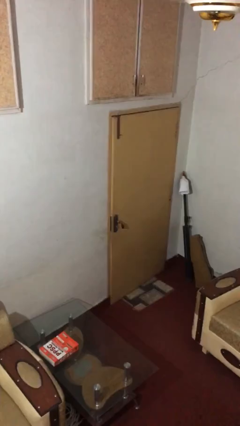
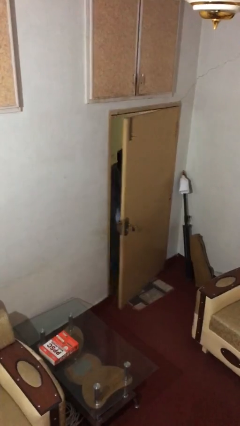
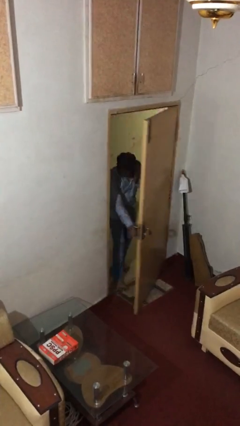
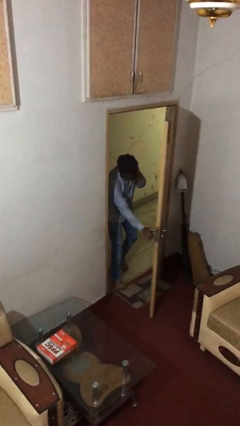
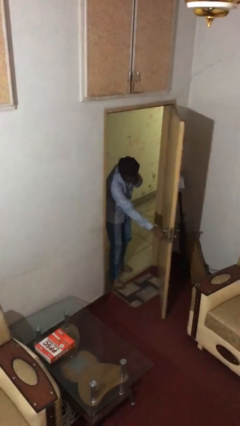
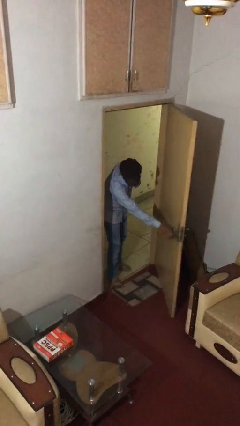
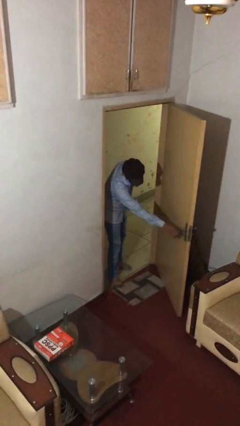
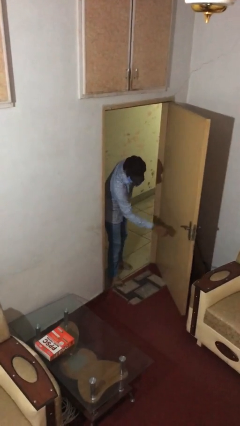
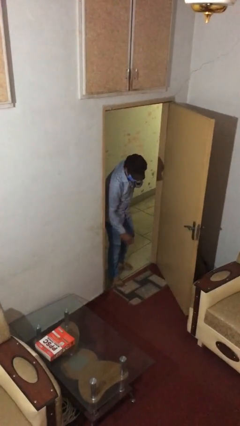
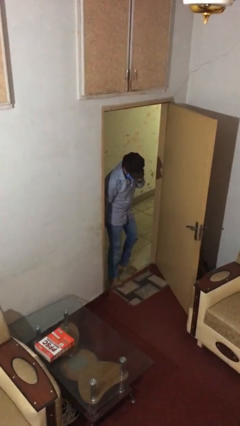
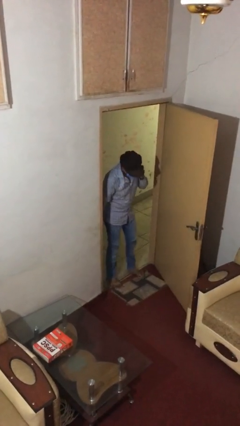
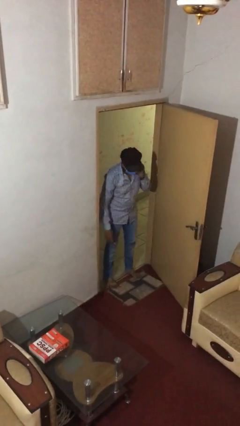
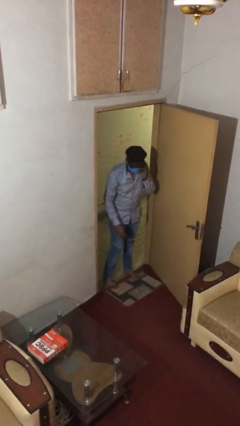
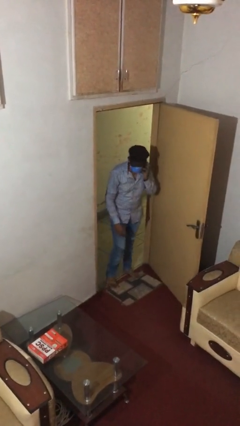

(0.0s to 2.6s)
person opens facility door

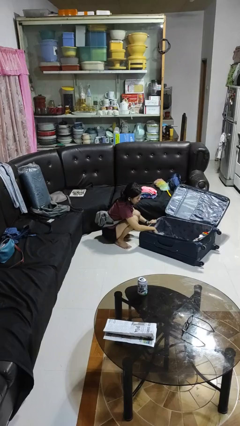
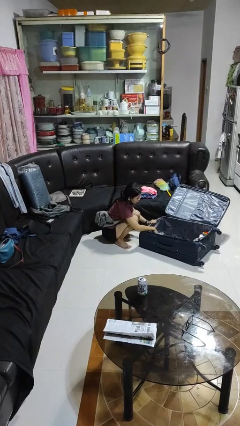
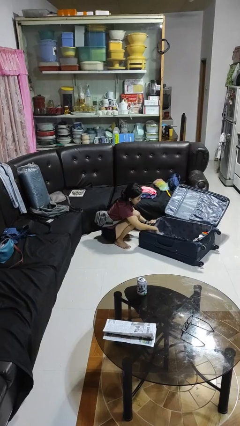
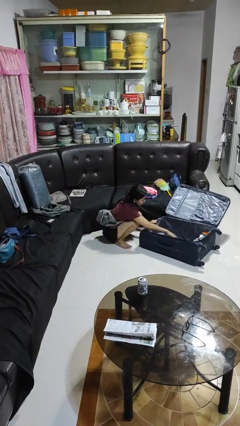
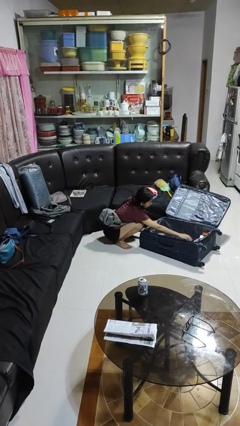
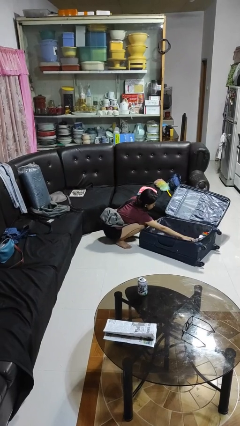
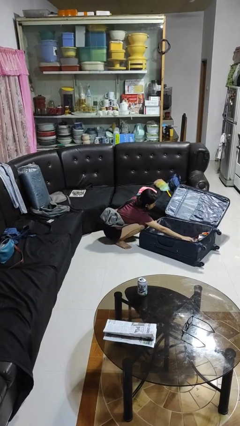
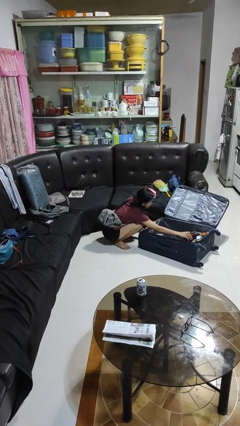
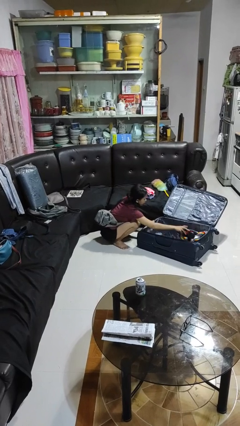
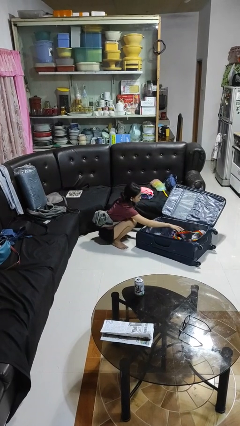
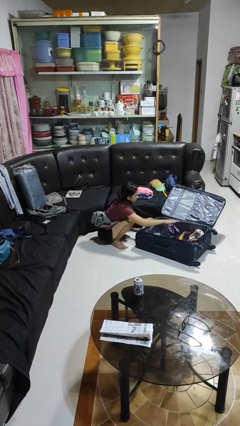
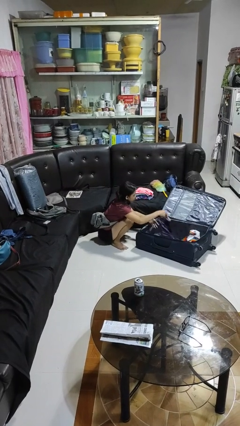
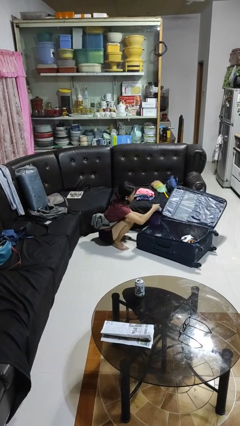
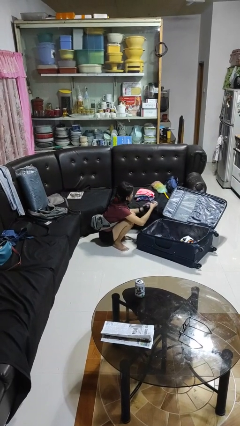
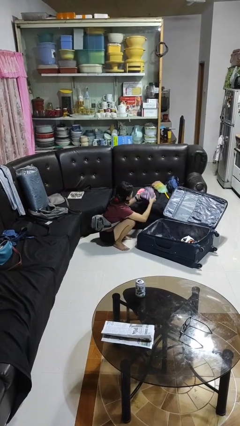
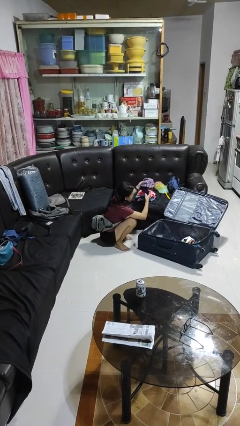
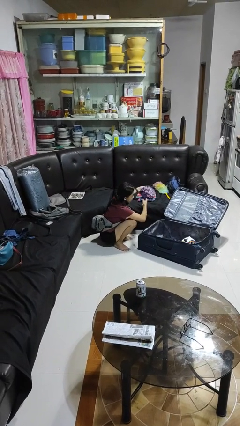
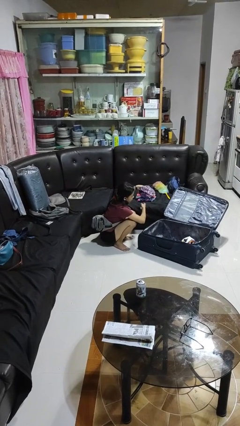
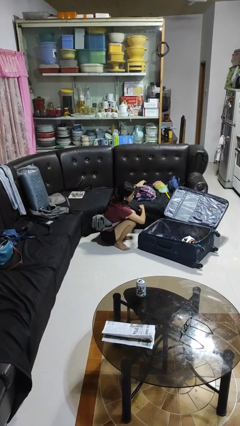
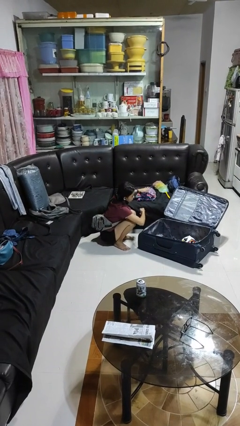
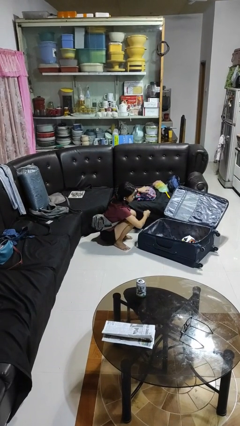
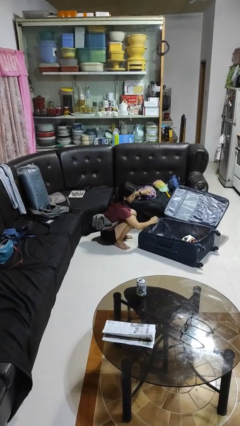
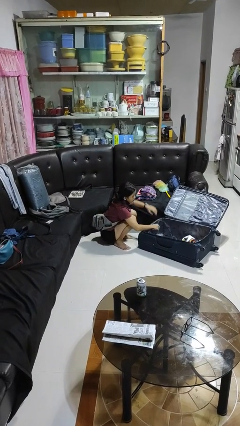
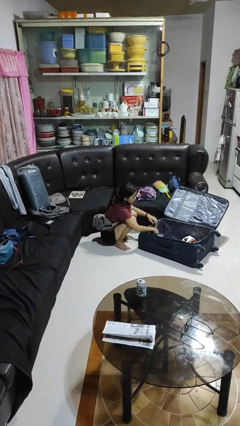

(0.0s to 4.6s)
person unloads clothes from suitcase

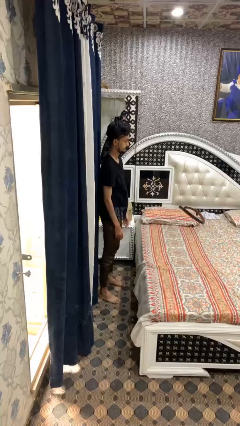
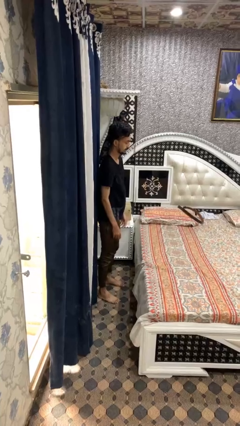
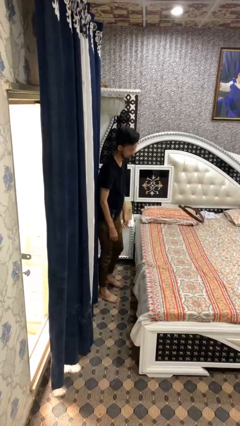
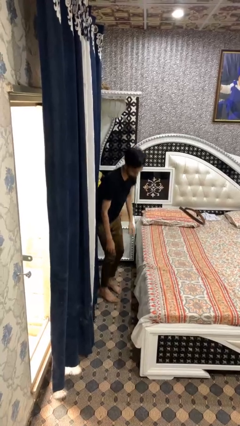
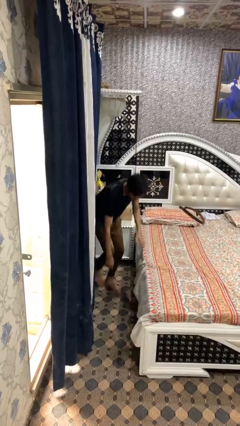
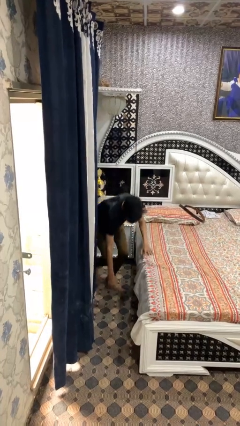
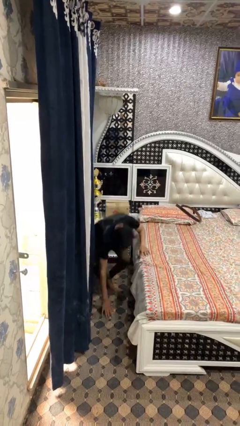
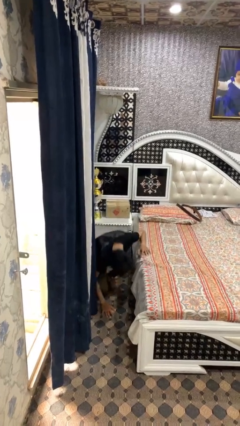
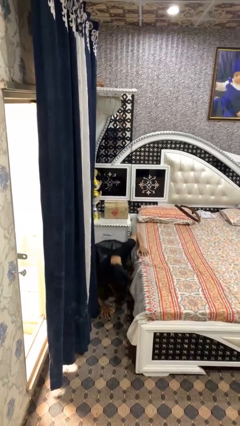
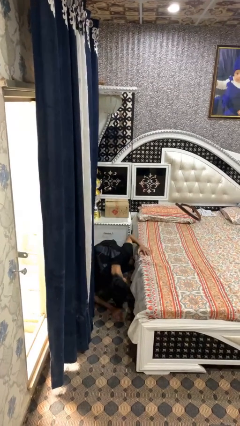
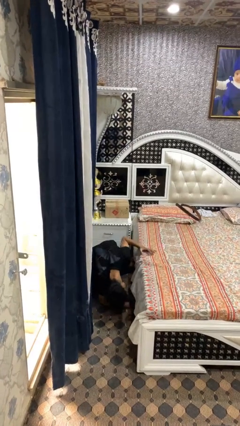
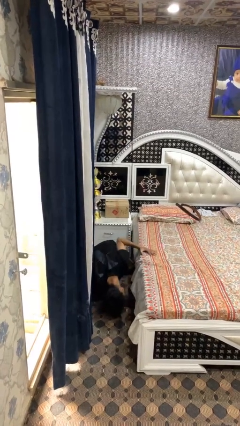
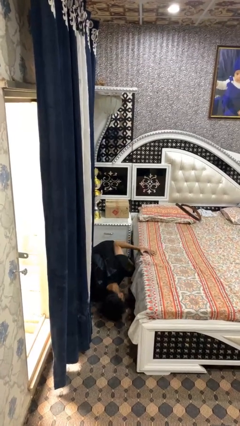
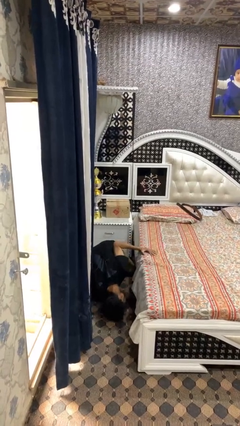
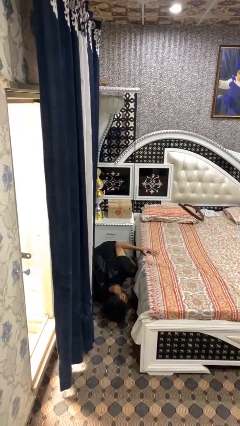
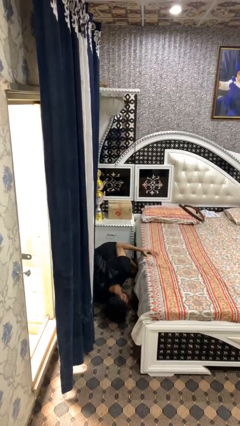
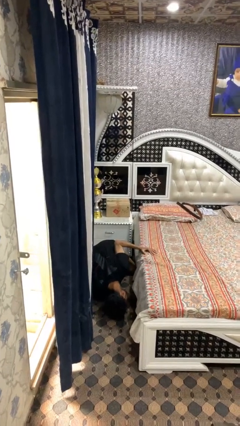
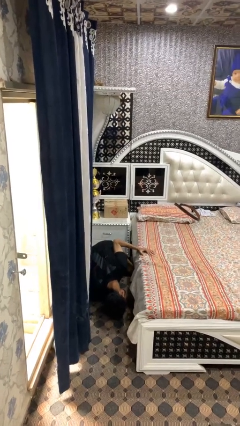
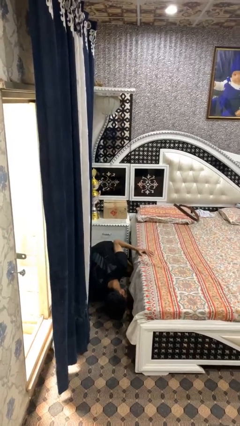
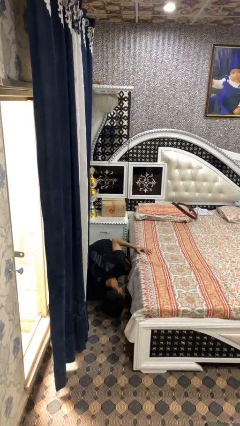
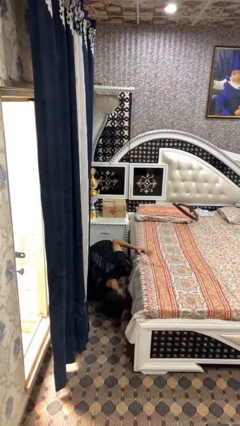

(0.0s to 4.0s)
person searches under bed

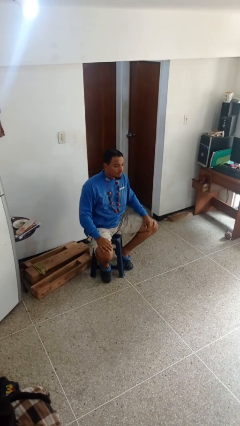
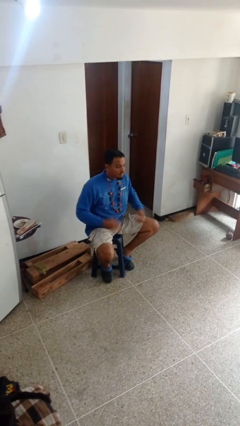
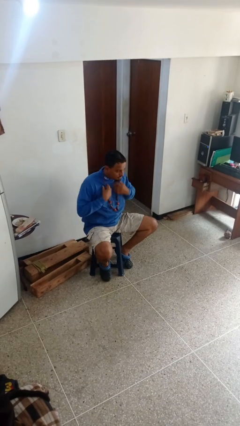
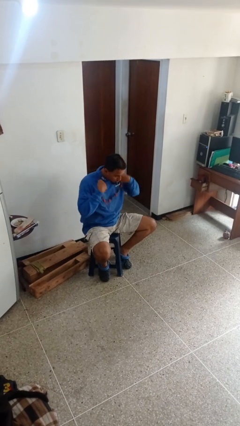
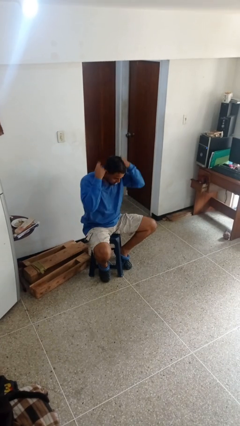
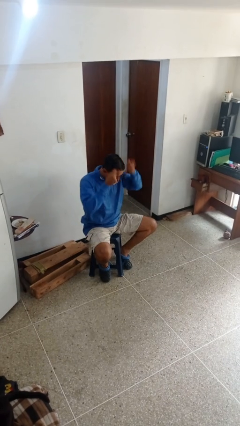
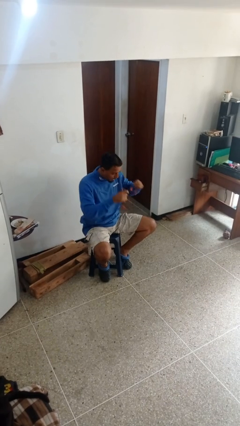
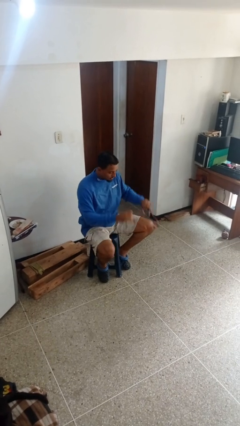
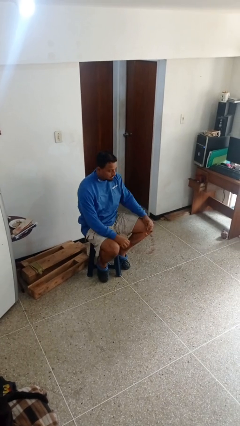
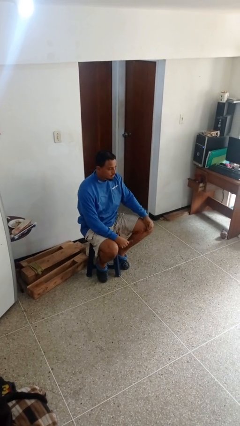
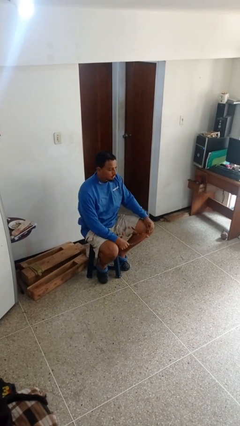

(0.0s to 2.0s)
person takes off necklace

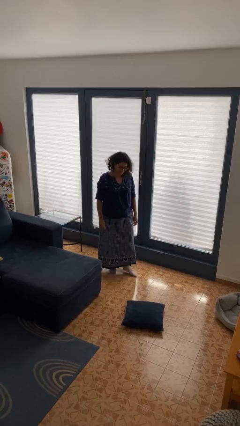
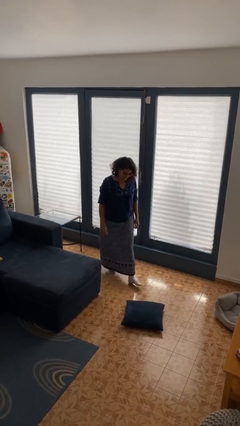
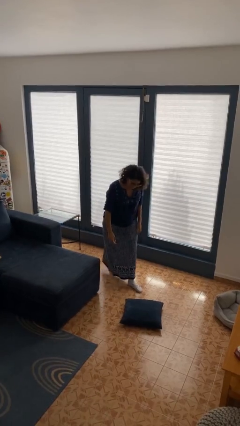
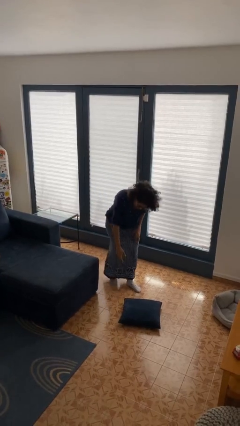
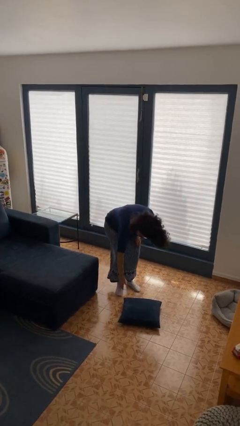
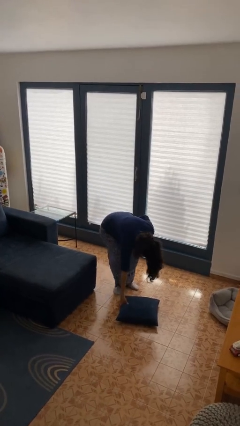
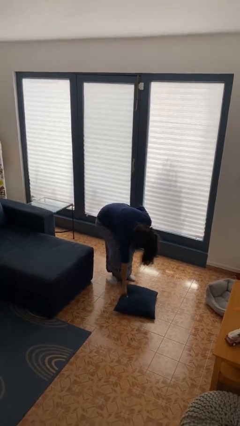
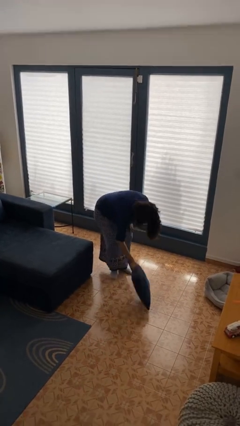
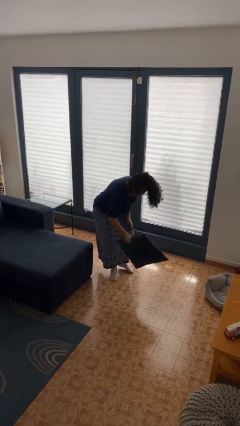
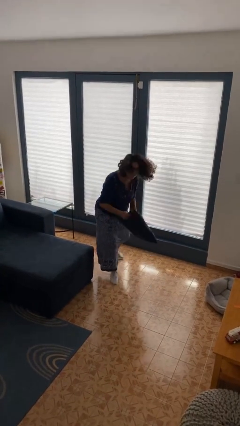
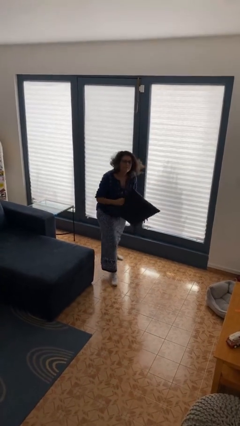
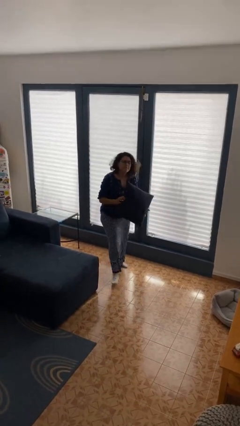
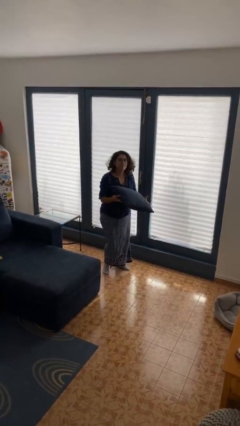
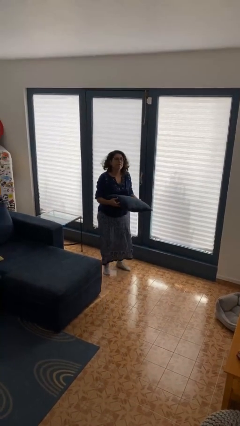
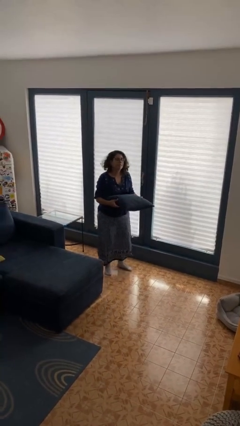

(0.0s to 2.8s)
person picks up object from floor

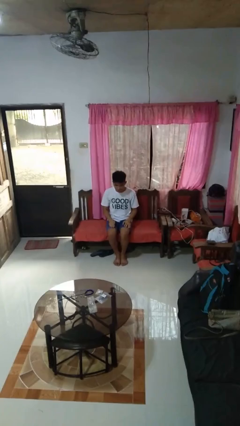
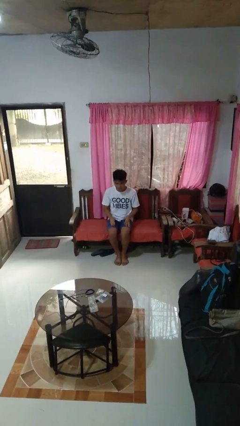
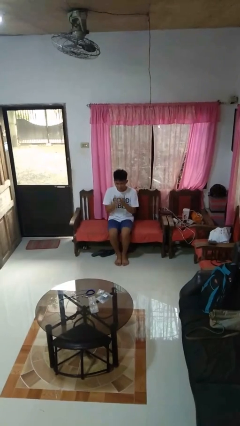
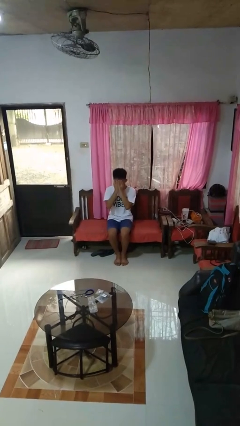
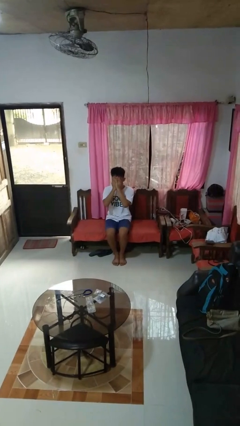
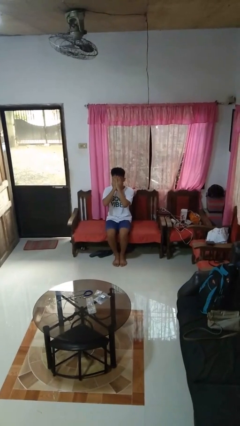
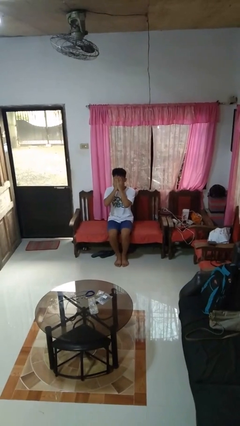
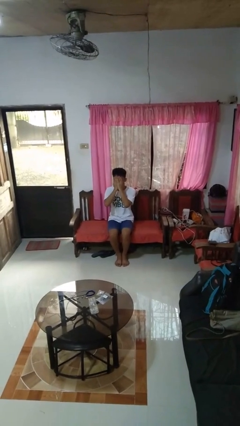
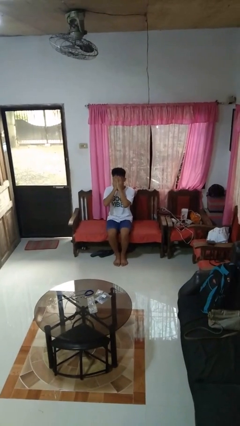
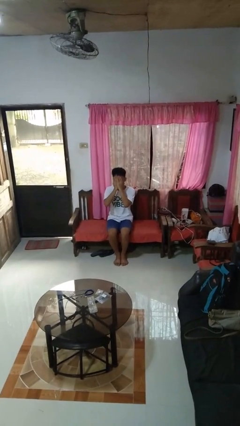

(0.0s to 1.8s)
person covers face with hands
